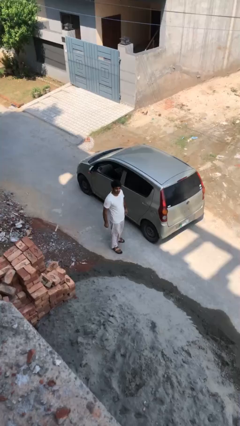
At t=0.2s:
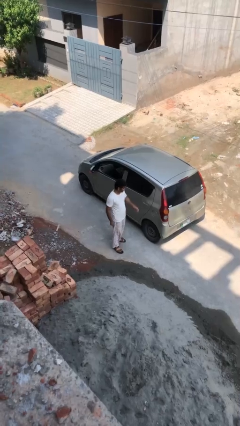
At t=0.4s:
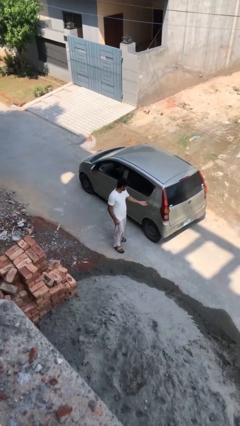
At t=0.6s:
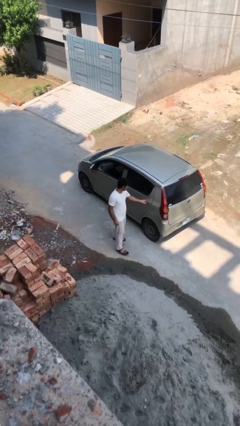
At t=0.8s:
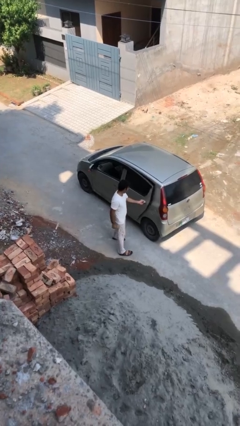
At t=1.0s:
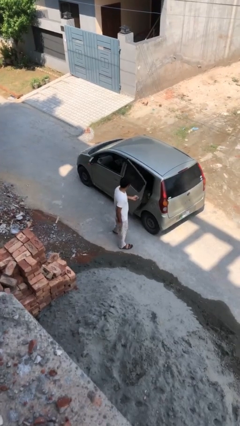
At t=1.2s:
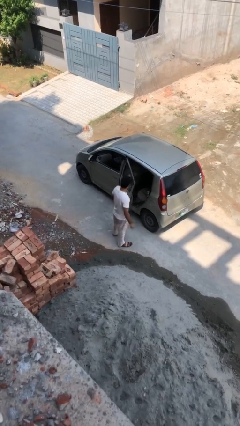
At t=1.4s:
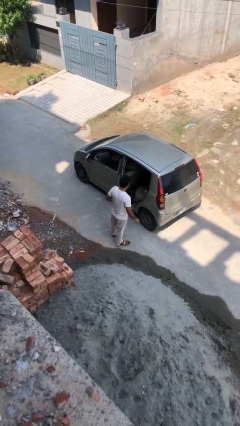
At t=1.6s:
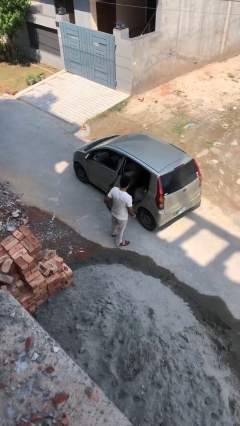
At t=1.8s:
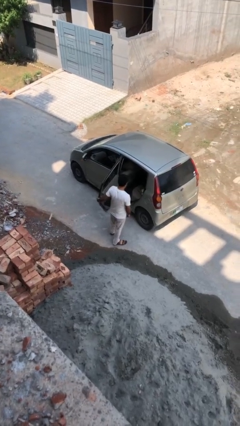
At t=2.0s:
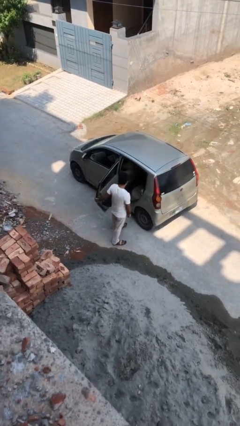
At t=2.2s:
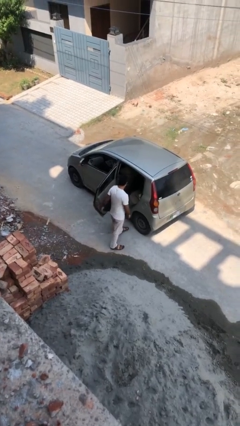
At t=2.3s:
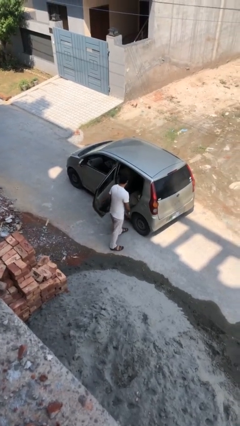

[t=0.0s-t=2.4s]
person opens car door

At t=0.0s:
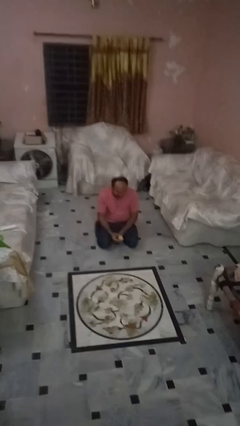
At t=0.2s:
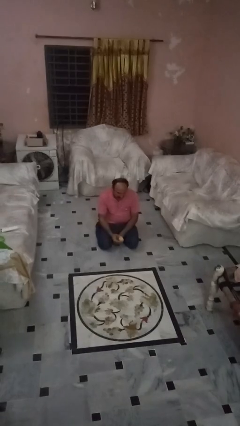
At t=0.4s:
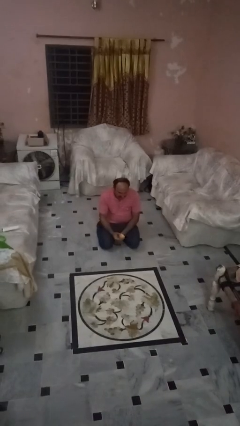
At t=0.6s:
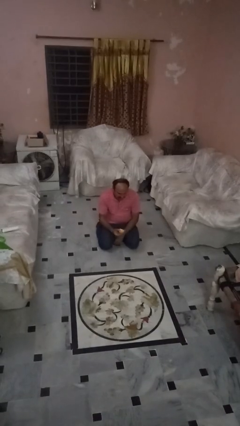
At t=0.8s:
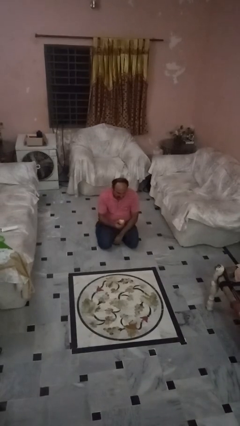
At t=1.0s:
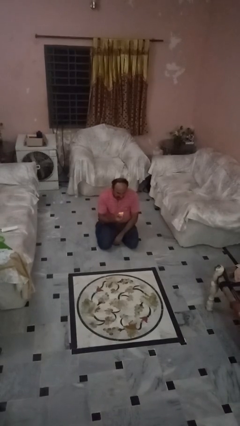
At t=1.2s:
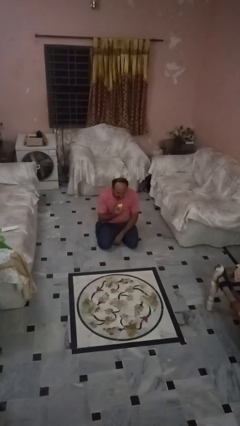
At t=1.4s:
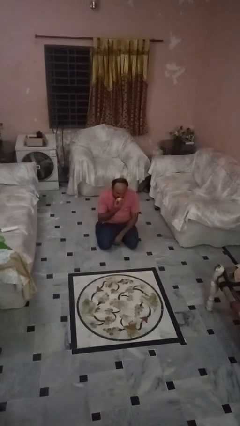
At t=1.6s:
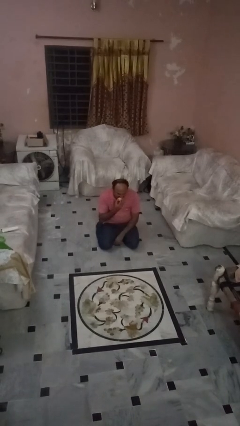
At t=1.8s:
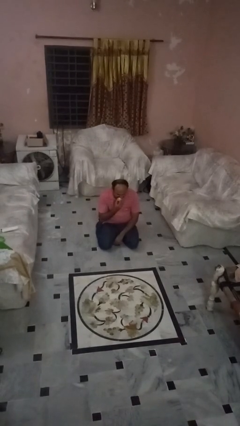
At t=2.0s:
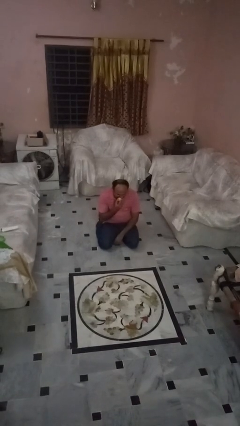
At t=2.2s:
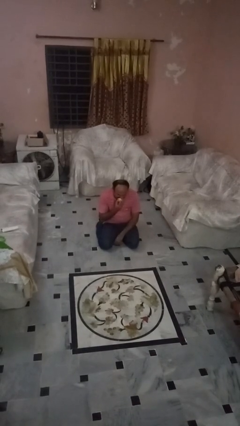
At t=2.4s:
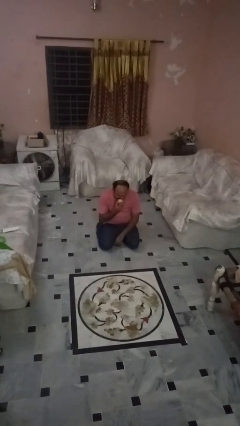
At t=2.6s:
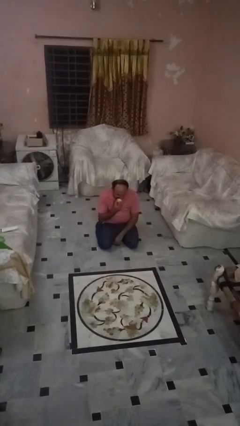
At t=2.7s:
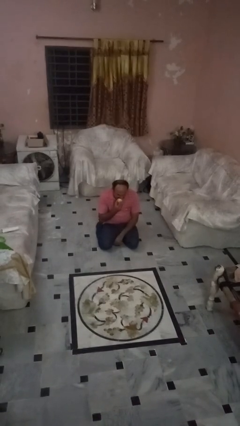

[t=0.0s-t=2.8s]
person eats apple

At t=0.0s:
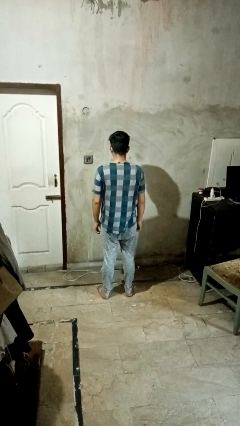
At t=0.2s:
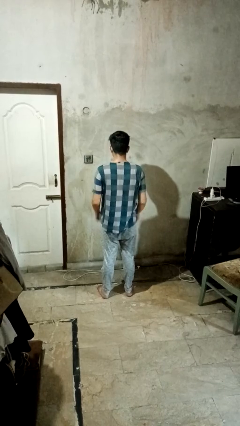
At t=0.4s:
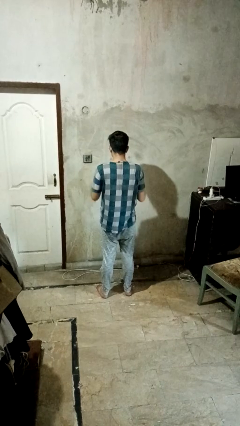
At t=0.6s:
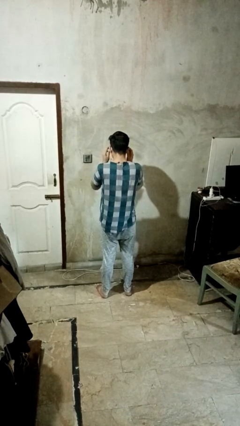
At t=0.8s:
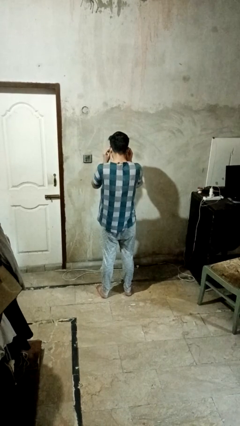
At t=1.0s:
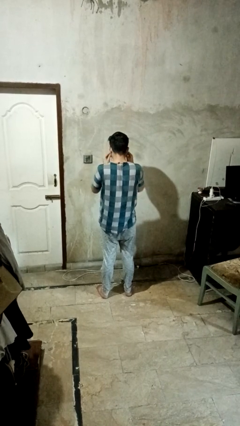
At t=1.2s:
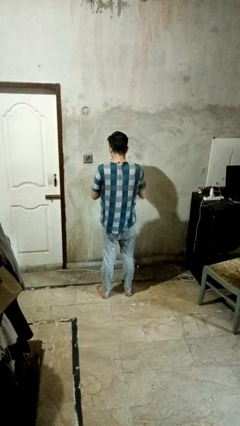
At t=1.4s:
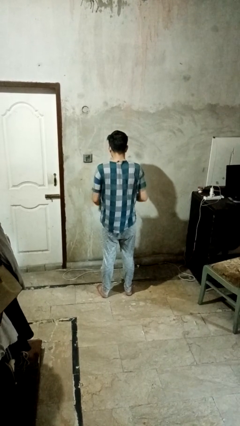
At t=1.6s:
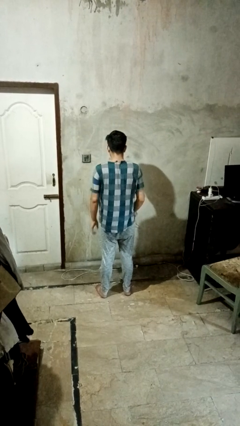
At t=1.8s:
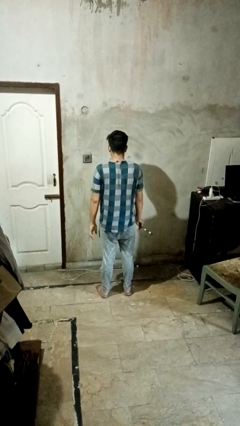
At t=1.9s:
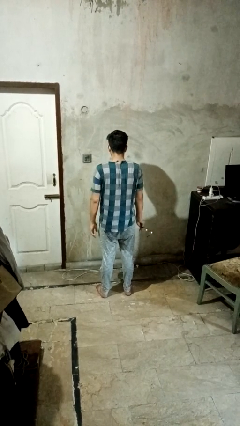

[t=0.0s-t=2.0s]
person takes off glasses

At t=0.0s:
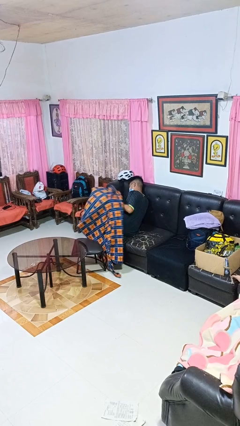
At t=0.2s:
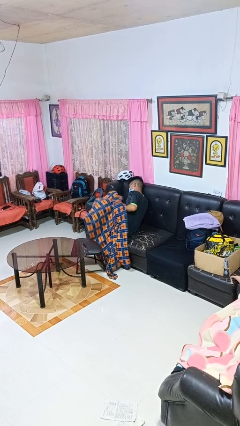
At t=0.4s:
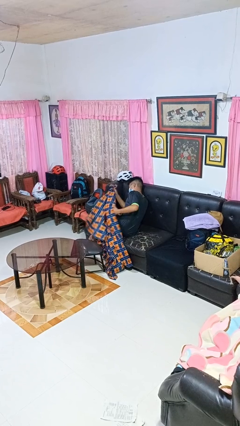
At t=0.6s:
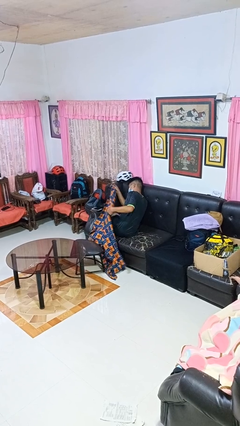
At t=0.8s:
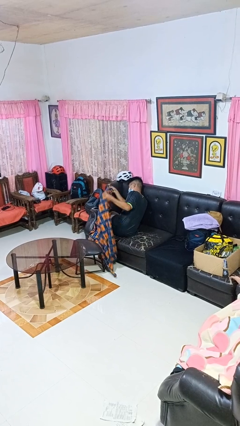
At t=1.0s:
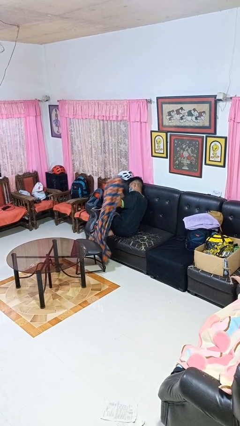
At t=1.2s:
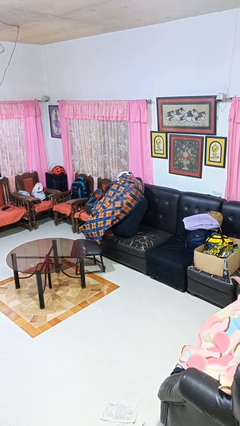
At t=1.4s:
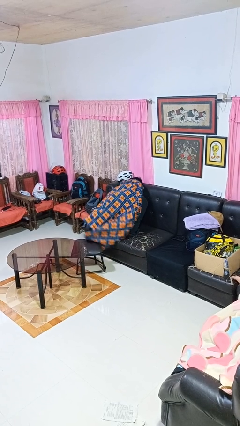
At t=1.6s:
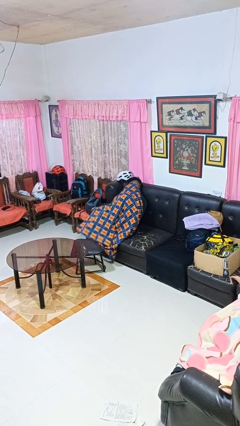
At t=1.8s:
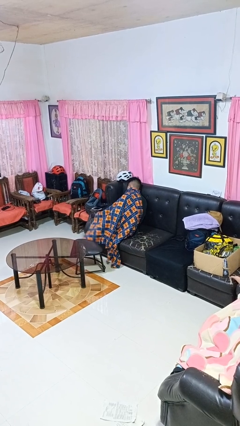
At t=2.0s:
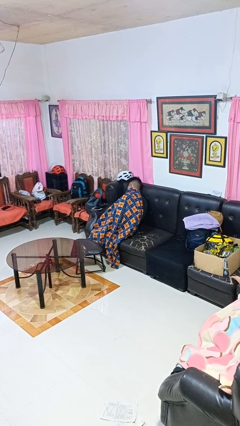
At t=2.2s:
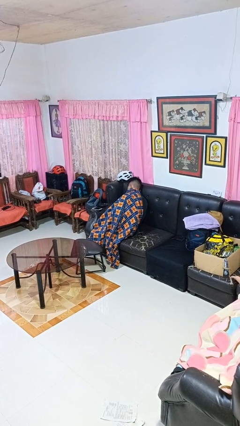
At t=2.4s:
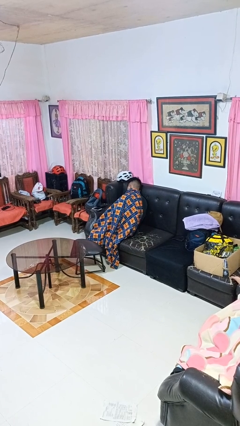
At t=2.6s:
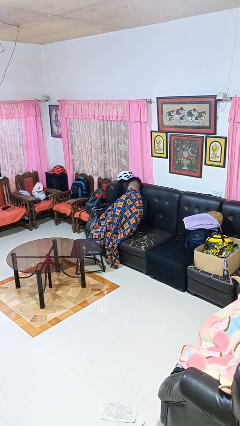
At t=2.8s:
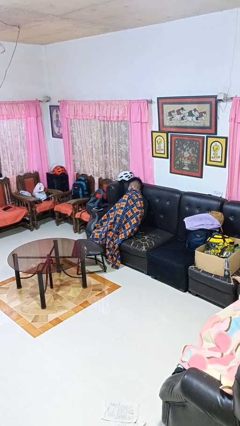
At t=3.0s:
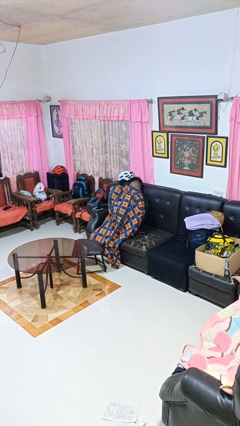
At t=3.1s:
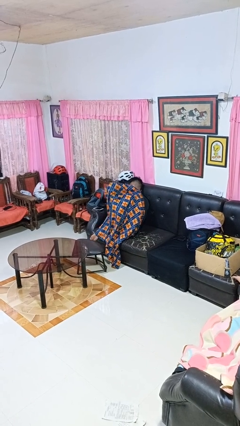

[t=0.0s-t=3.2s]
person covers with blanket

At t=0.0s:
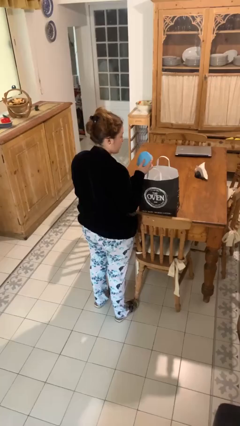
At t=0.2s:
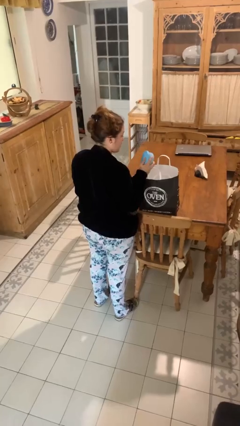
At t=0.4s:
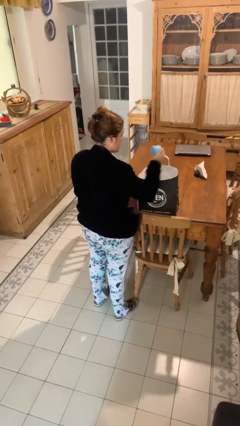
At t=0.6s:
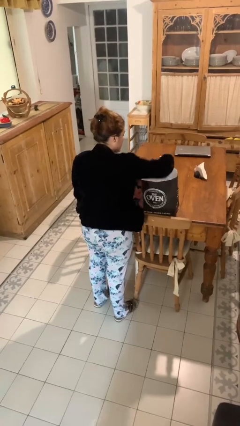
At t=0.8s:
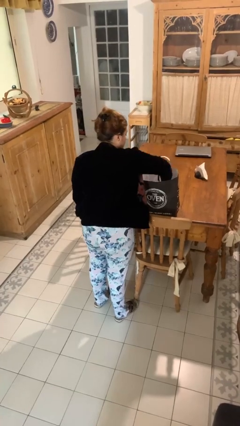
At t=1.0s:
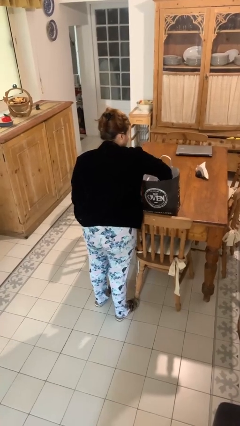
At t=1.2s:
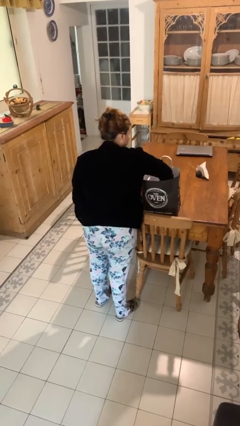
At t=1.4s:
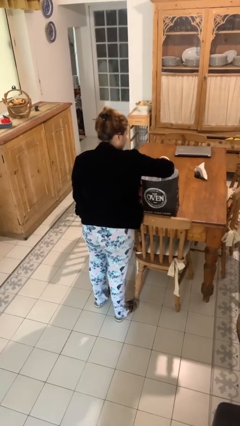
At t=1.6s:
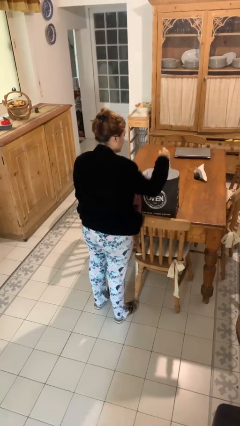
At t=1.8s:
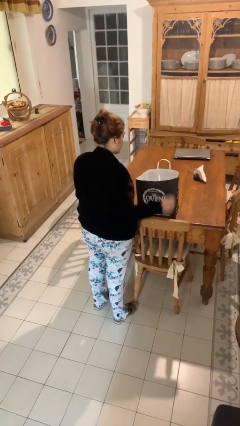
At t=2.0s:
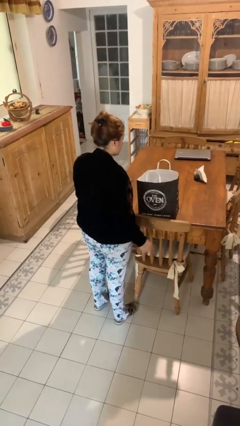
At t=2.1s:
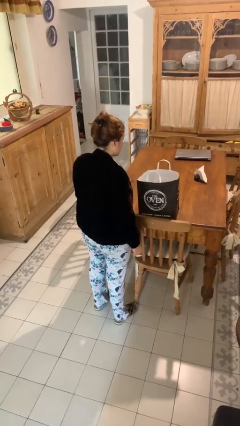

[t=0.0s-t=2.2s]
person puts object into bag

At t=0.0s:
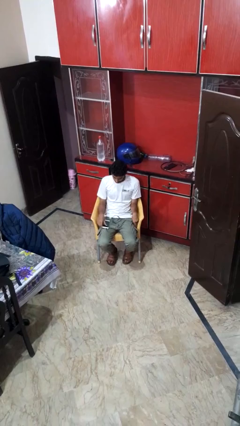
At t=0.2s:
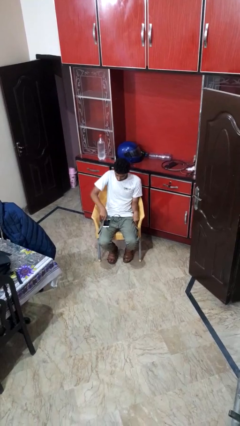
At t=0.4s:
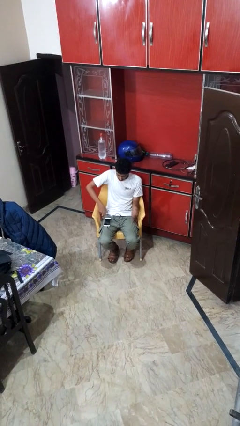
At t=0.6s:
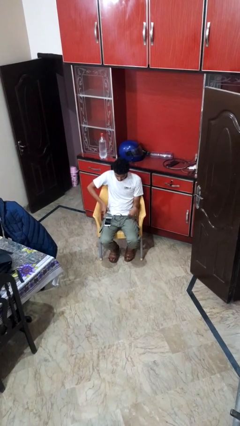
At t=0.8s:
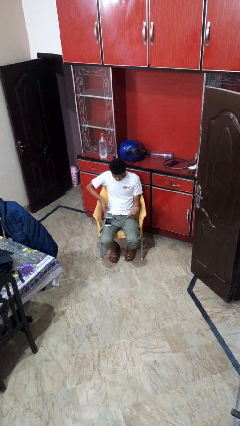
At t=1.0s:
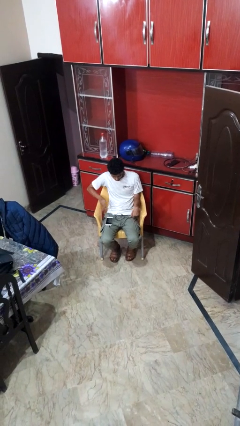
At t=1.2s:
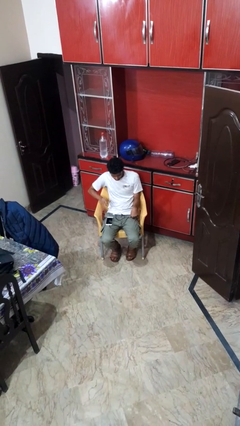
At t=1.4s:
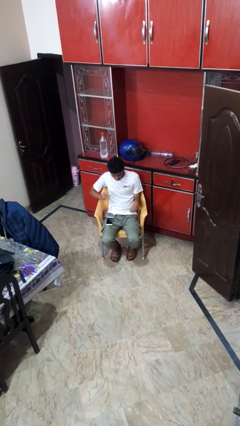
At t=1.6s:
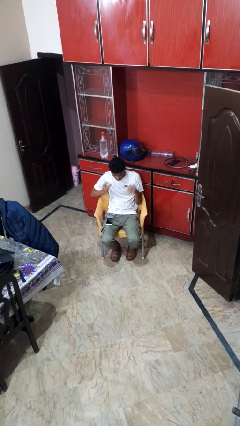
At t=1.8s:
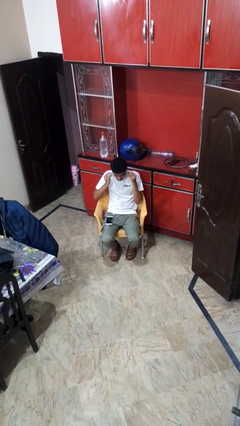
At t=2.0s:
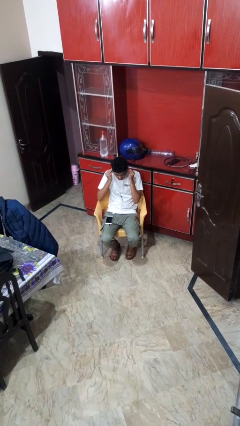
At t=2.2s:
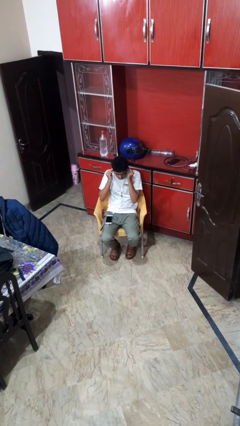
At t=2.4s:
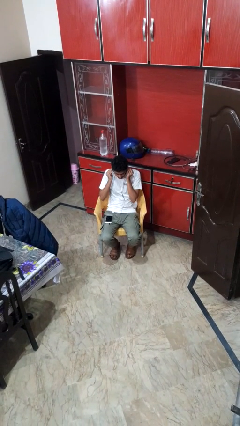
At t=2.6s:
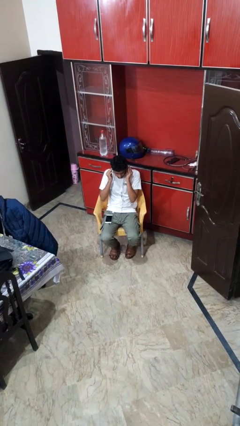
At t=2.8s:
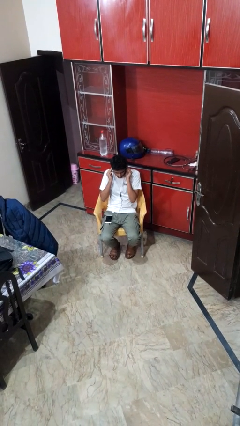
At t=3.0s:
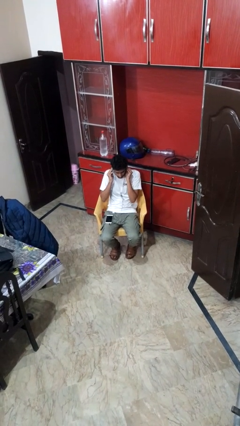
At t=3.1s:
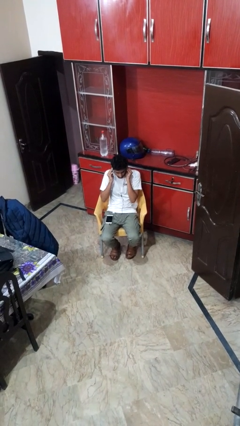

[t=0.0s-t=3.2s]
person puts on headphones

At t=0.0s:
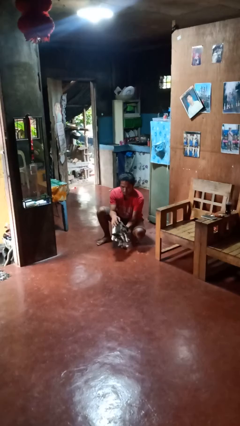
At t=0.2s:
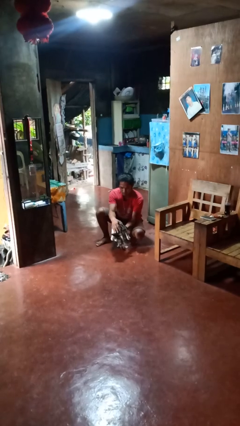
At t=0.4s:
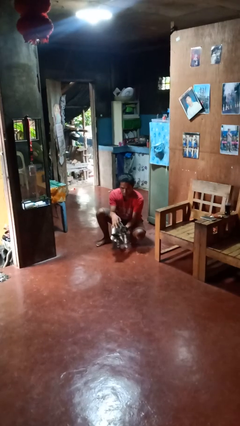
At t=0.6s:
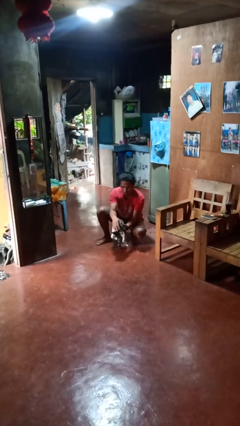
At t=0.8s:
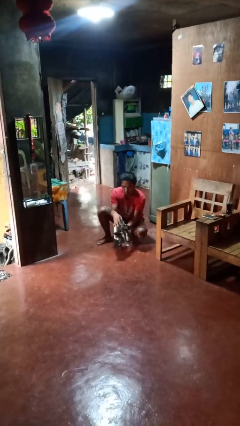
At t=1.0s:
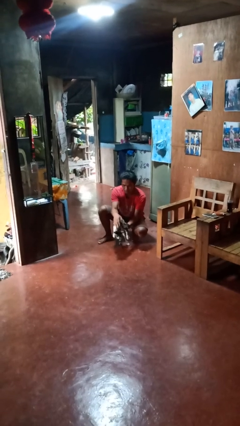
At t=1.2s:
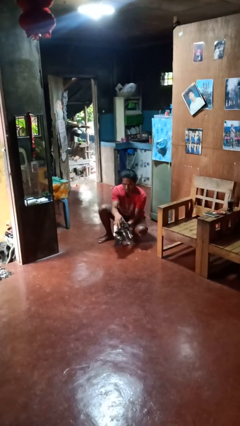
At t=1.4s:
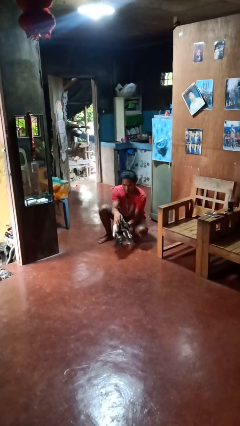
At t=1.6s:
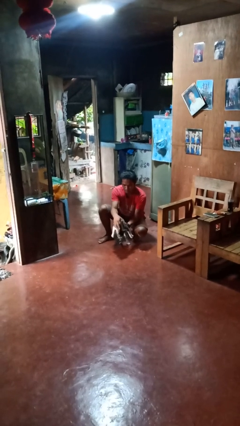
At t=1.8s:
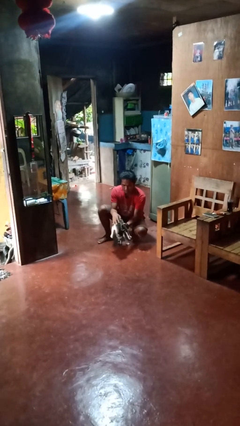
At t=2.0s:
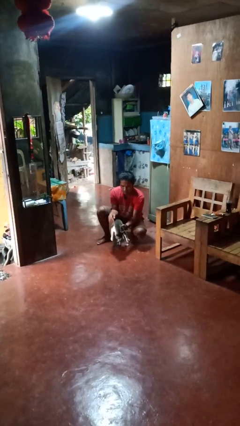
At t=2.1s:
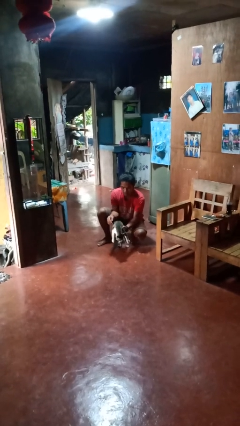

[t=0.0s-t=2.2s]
person pets cat
